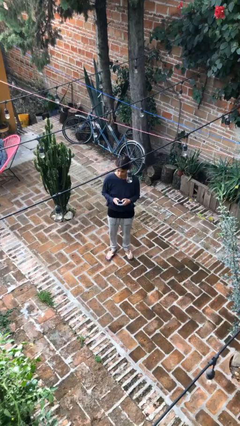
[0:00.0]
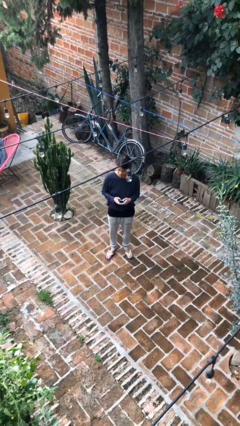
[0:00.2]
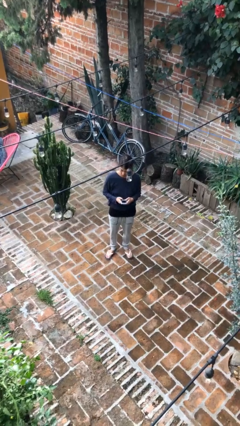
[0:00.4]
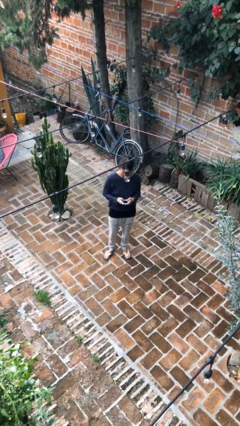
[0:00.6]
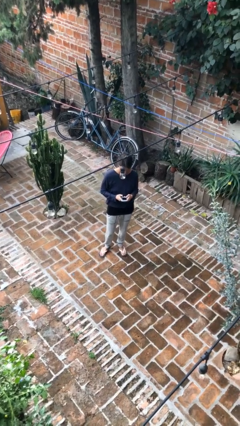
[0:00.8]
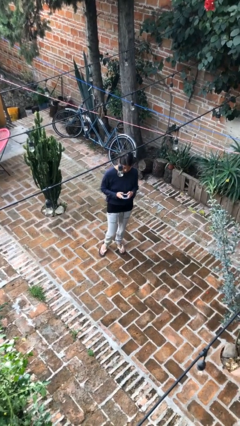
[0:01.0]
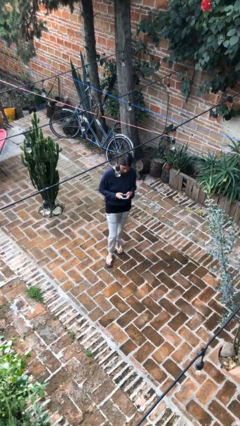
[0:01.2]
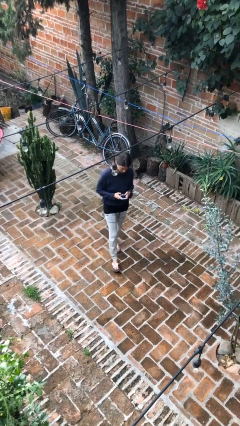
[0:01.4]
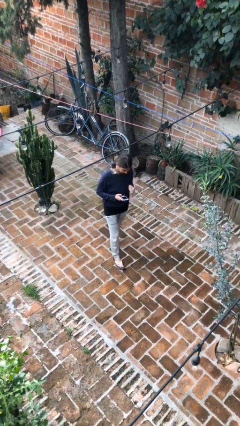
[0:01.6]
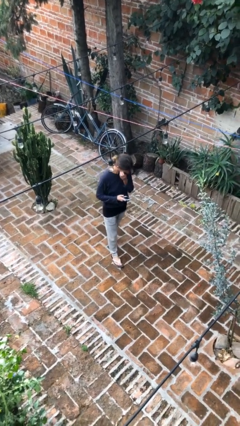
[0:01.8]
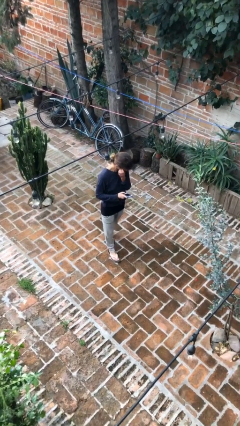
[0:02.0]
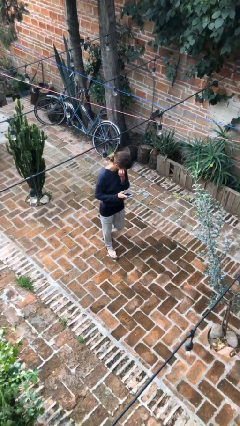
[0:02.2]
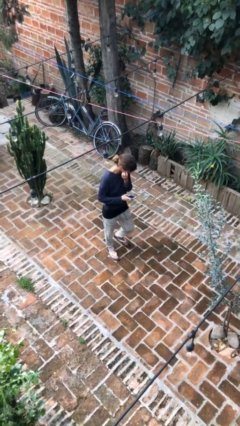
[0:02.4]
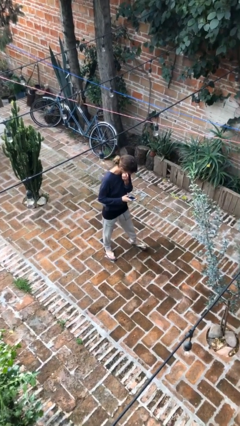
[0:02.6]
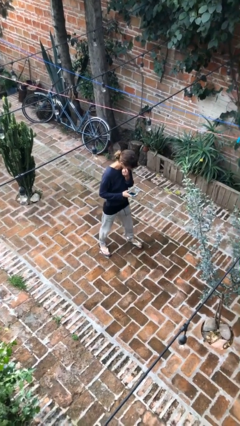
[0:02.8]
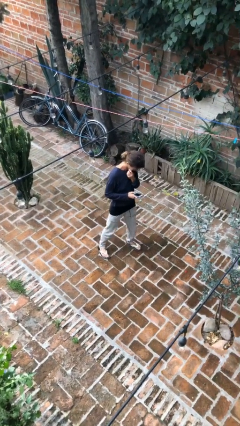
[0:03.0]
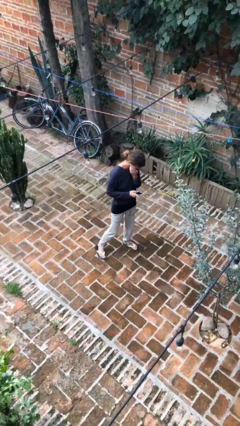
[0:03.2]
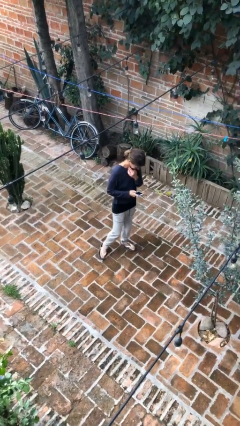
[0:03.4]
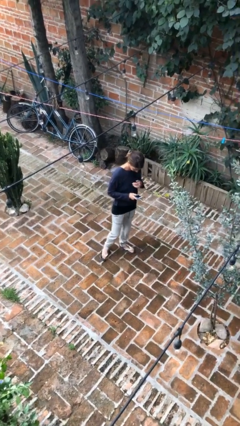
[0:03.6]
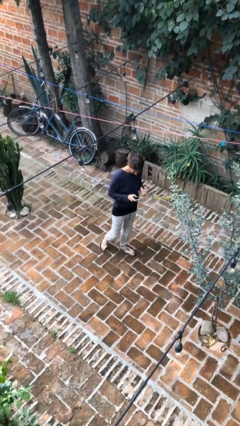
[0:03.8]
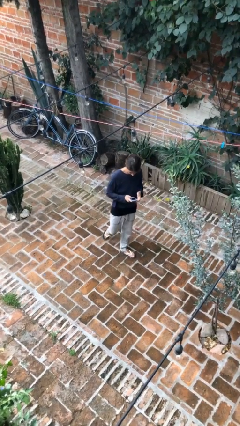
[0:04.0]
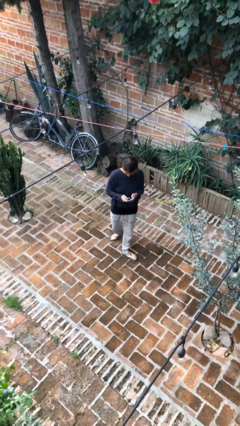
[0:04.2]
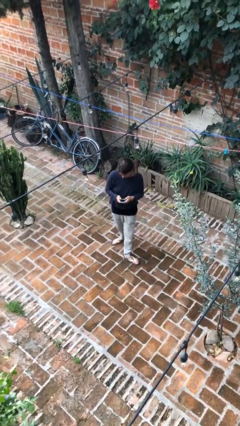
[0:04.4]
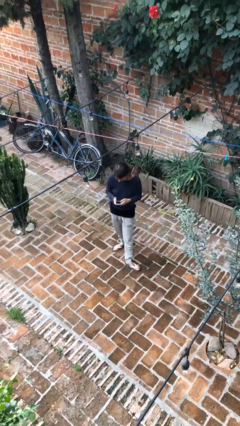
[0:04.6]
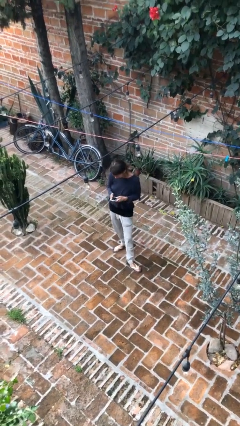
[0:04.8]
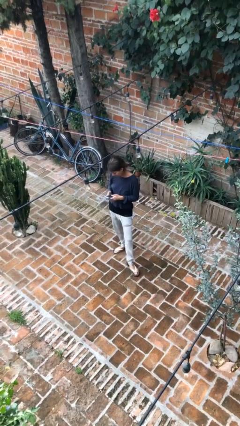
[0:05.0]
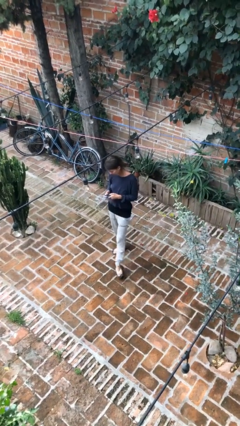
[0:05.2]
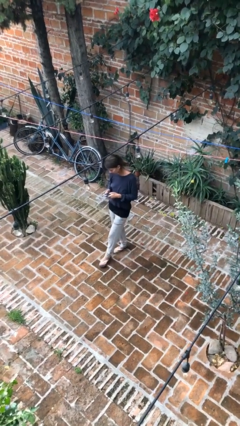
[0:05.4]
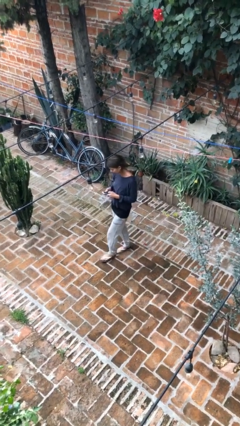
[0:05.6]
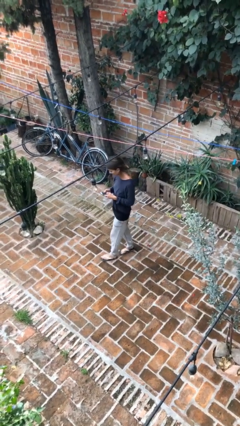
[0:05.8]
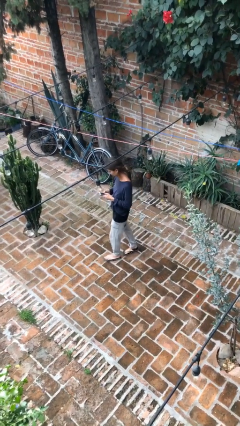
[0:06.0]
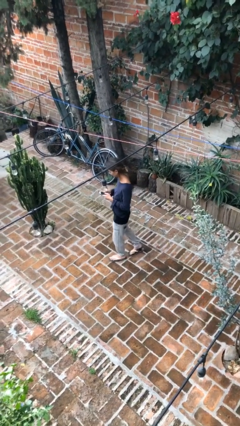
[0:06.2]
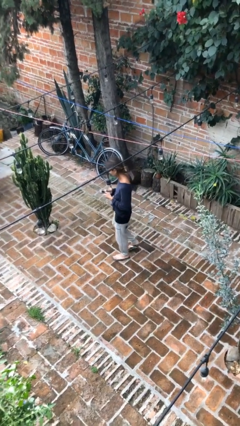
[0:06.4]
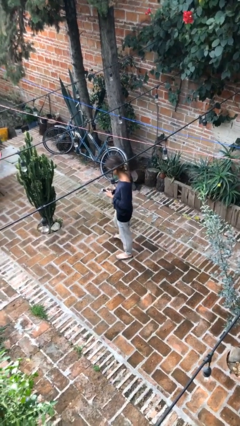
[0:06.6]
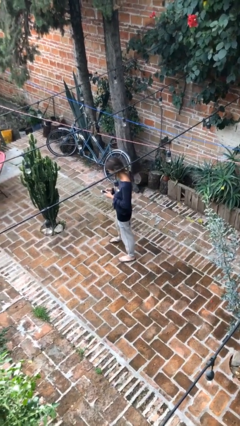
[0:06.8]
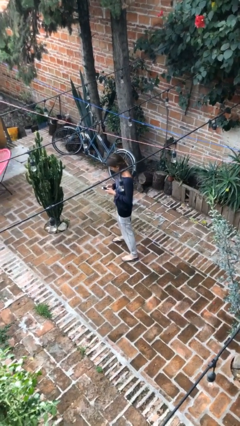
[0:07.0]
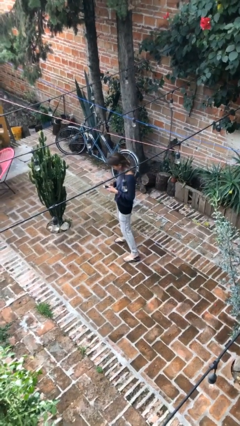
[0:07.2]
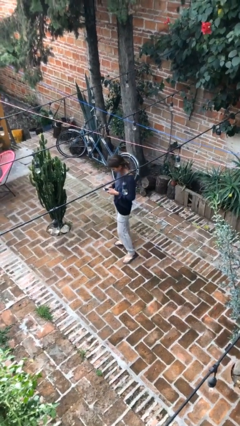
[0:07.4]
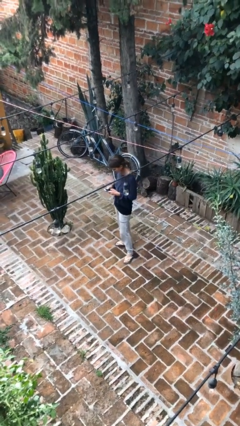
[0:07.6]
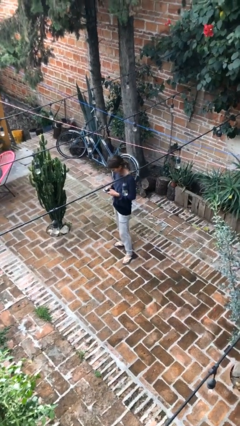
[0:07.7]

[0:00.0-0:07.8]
person texts on phone

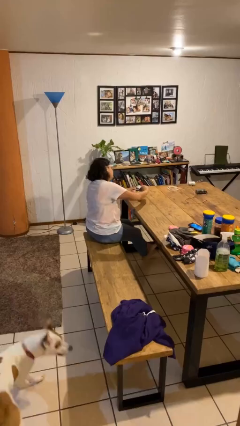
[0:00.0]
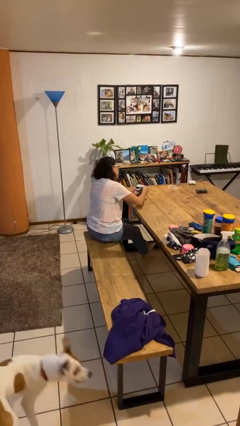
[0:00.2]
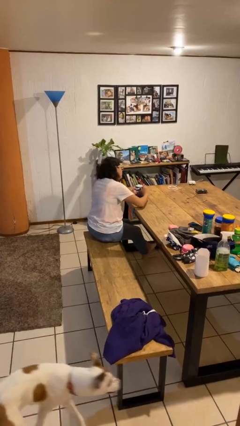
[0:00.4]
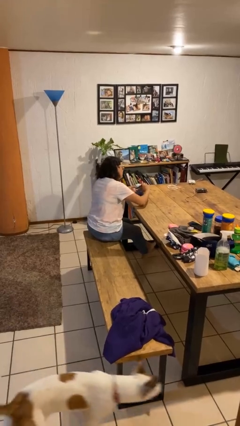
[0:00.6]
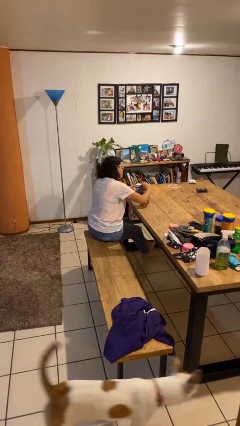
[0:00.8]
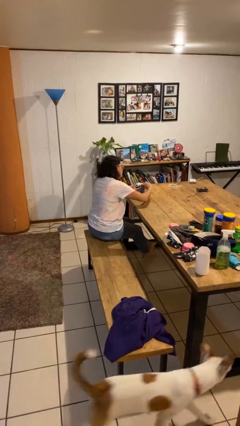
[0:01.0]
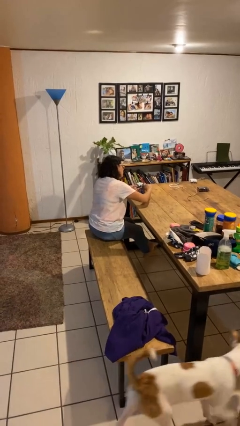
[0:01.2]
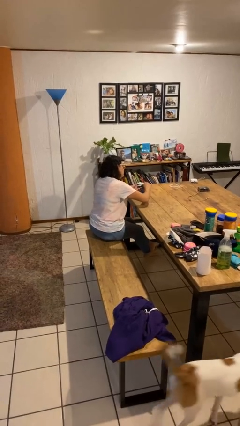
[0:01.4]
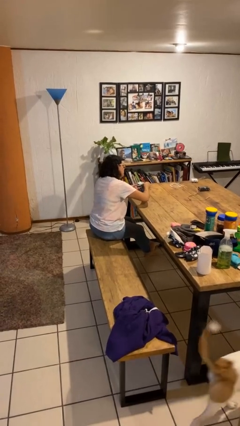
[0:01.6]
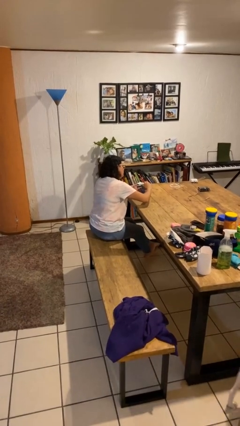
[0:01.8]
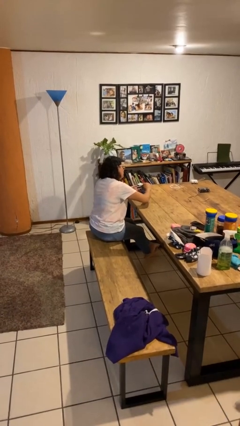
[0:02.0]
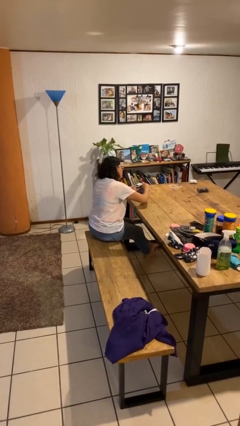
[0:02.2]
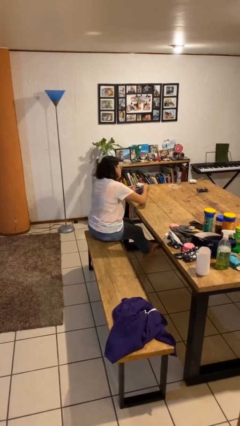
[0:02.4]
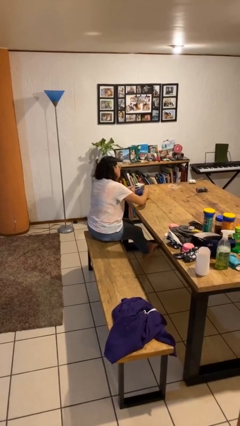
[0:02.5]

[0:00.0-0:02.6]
person opens can with can opener

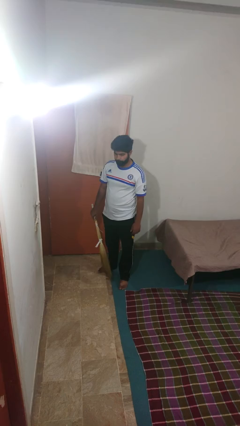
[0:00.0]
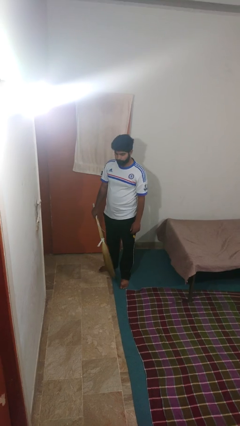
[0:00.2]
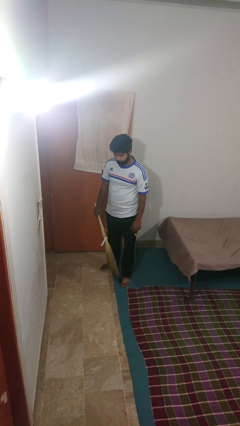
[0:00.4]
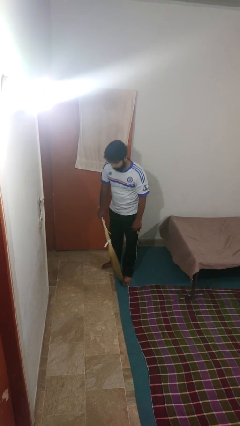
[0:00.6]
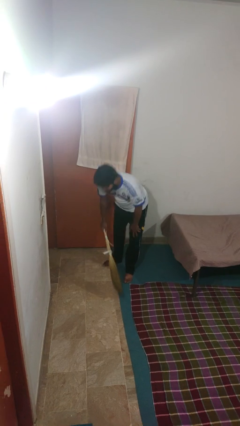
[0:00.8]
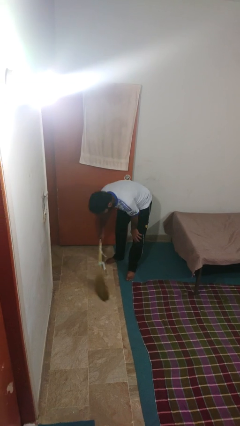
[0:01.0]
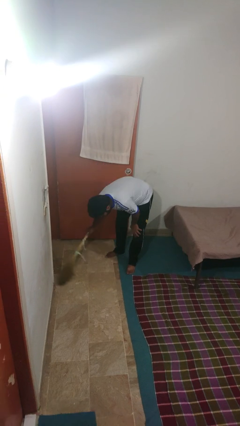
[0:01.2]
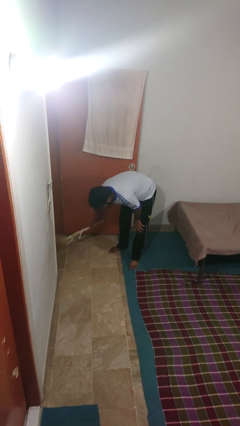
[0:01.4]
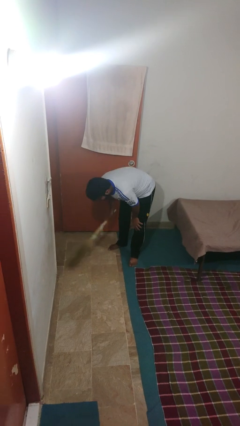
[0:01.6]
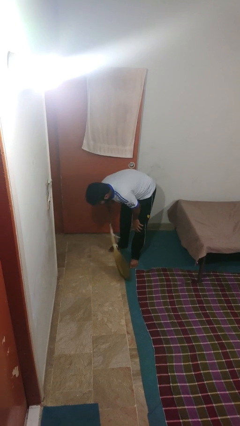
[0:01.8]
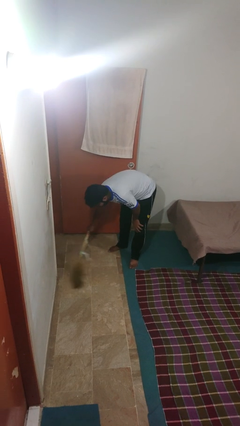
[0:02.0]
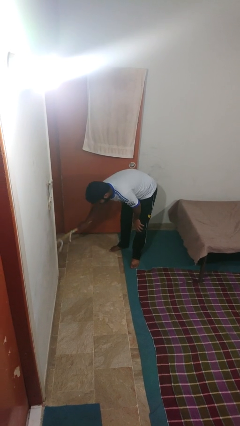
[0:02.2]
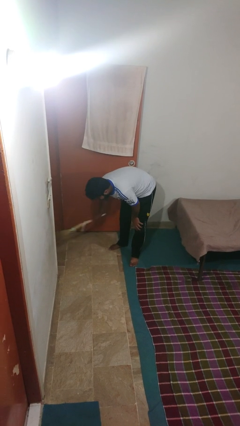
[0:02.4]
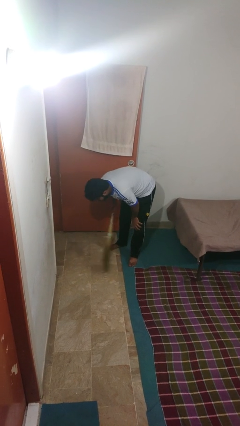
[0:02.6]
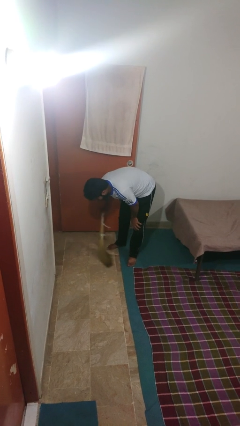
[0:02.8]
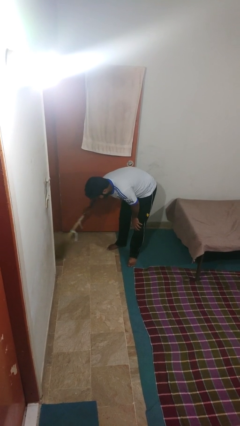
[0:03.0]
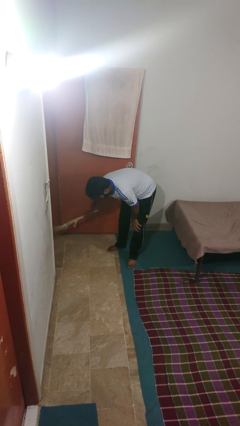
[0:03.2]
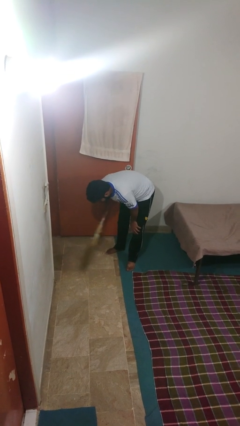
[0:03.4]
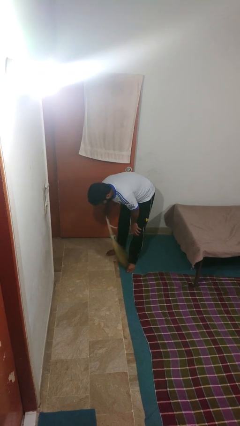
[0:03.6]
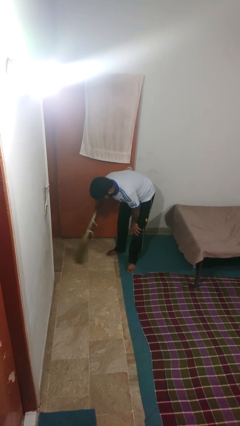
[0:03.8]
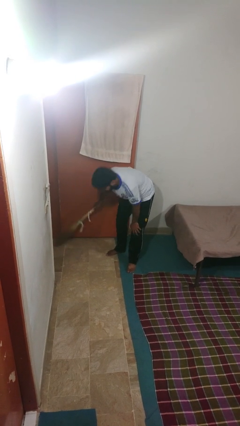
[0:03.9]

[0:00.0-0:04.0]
person sweeps floor

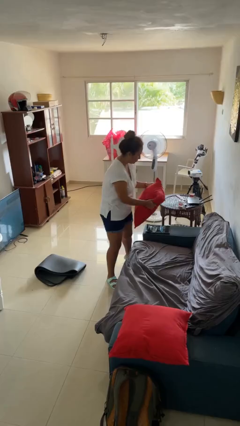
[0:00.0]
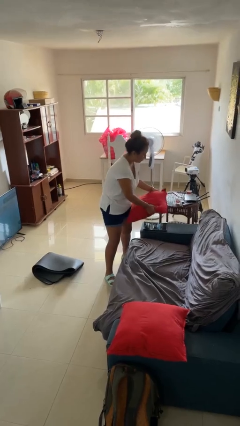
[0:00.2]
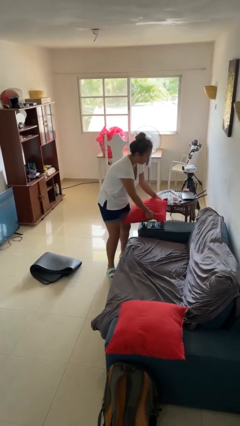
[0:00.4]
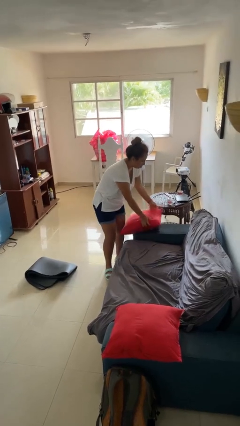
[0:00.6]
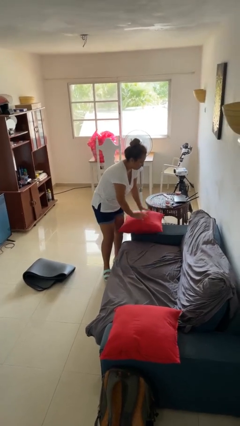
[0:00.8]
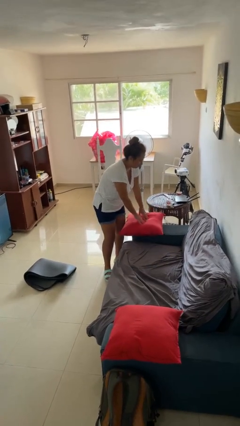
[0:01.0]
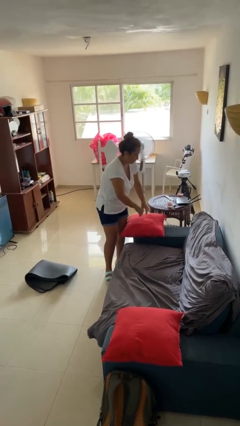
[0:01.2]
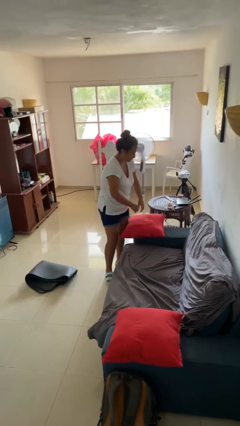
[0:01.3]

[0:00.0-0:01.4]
person puts down object on couch

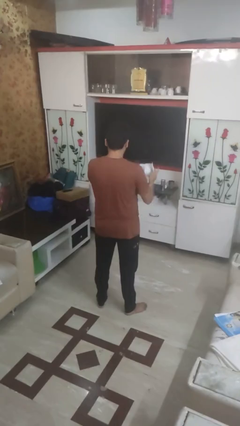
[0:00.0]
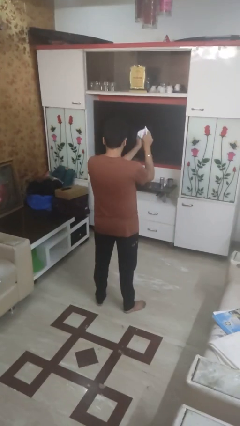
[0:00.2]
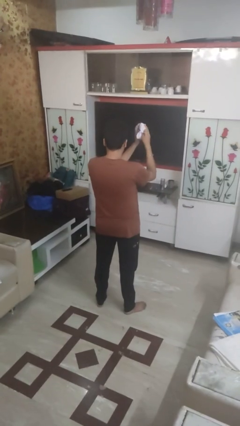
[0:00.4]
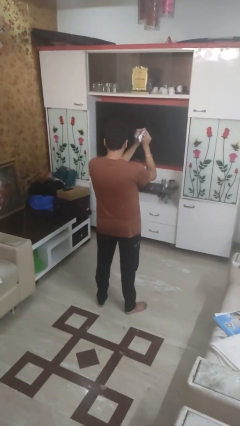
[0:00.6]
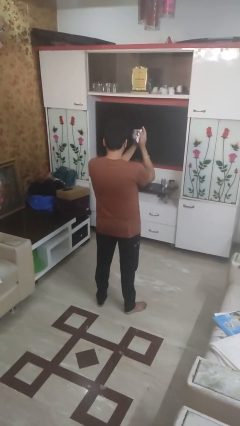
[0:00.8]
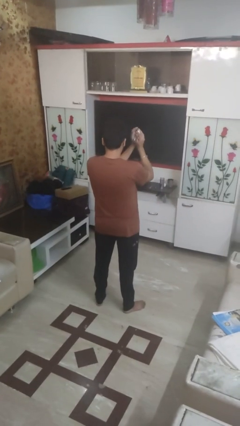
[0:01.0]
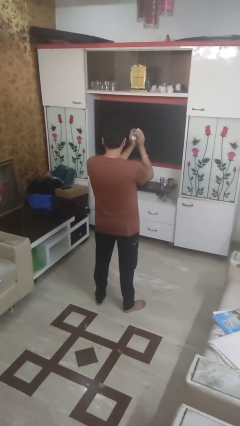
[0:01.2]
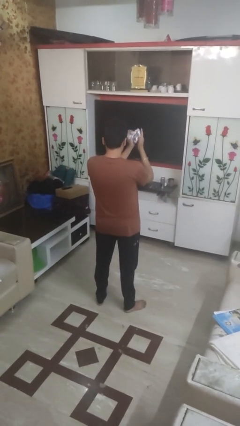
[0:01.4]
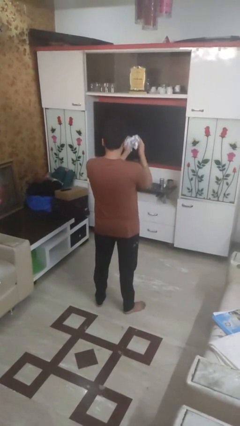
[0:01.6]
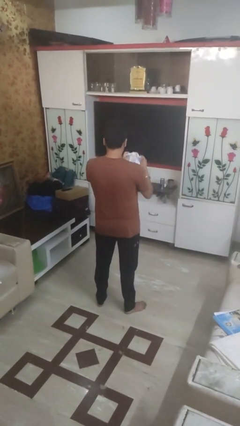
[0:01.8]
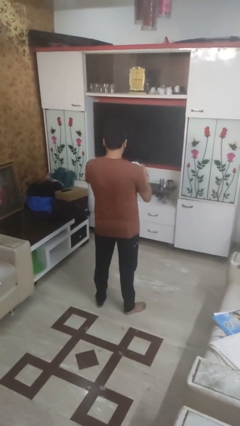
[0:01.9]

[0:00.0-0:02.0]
person crumples paper
